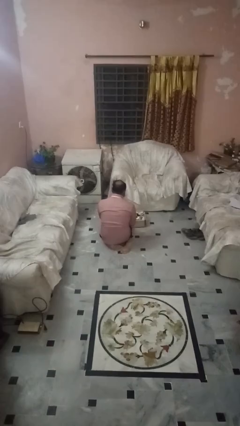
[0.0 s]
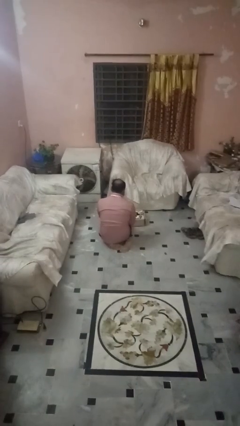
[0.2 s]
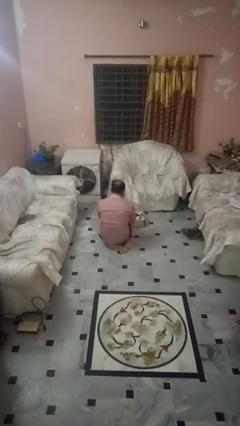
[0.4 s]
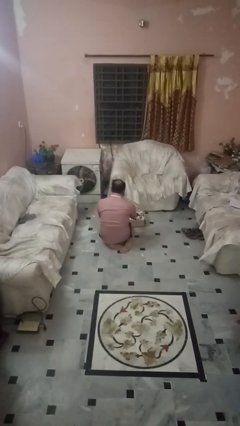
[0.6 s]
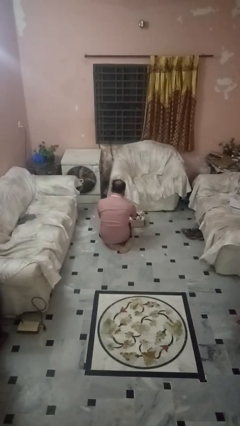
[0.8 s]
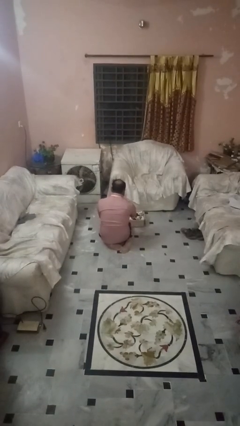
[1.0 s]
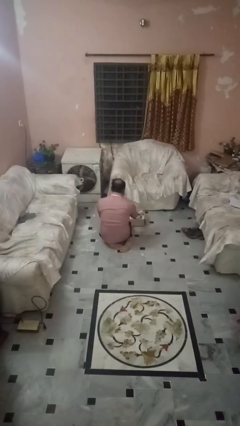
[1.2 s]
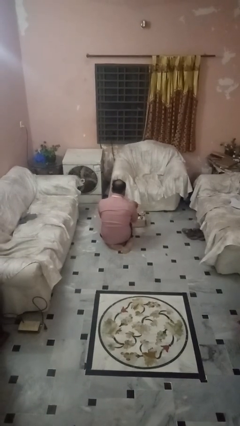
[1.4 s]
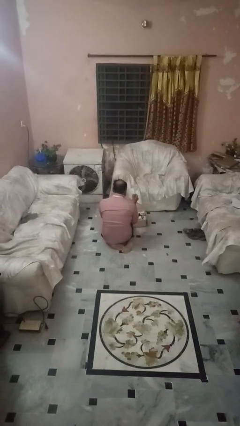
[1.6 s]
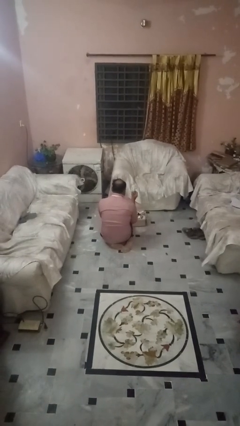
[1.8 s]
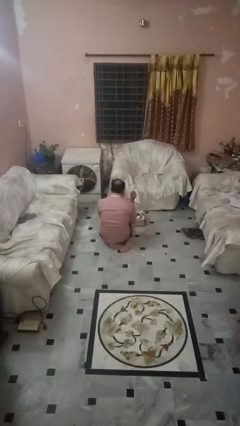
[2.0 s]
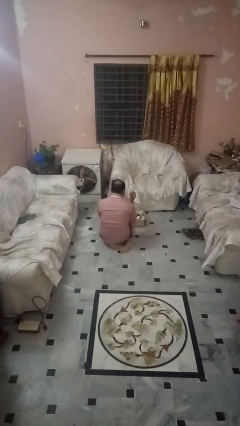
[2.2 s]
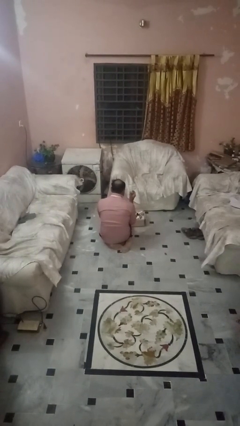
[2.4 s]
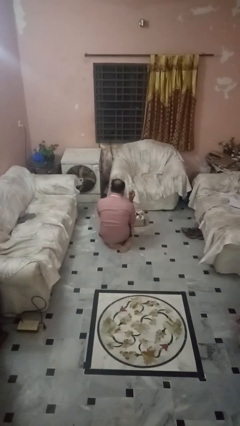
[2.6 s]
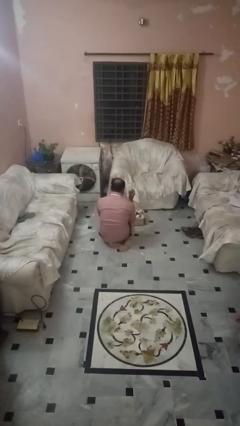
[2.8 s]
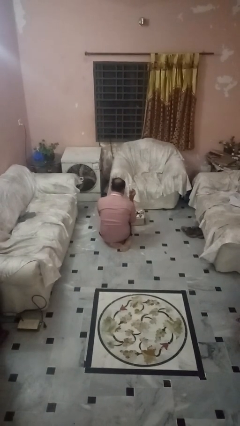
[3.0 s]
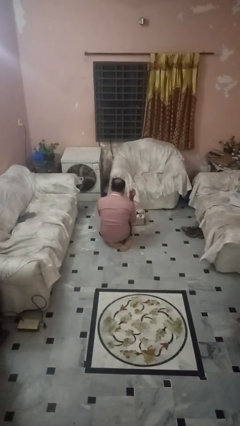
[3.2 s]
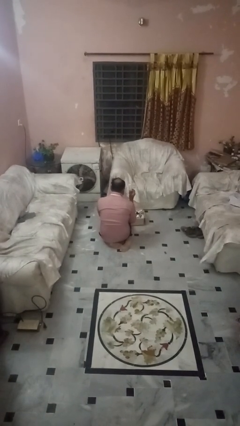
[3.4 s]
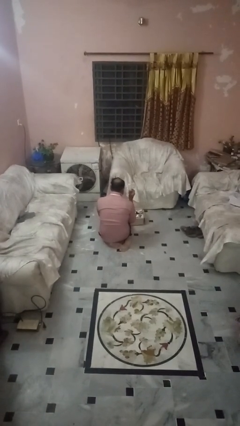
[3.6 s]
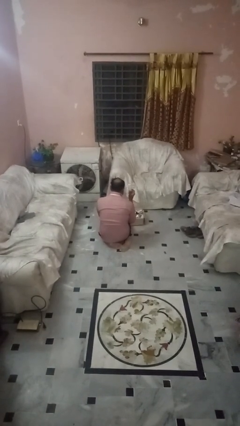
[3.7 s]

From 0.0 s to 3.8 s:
person takes object from box

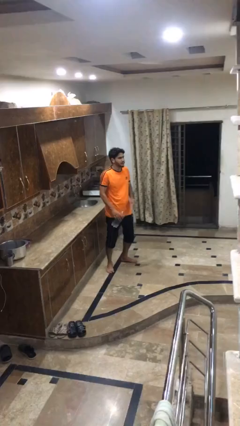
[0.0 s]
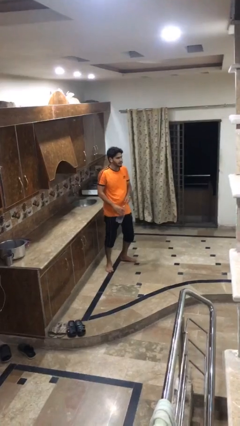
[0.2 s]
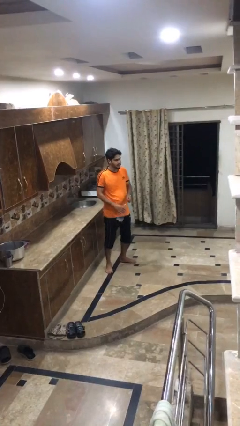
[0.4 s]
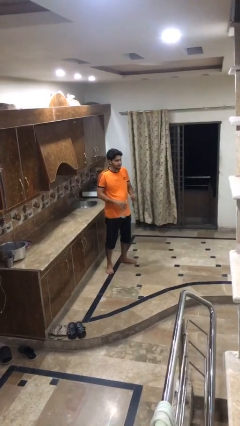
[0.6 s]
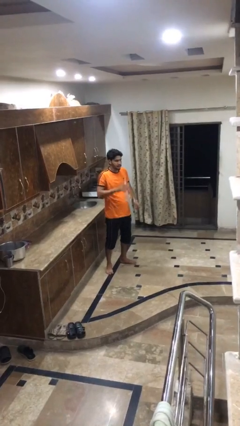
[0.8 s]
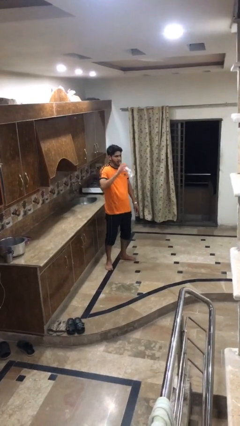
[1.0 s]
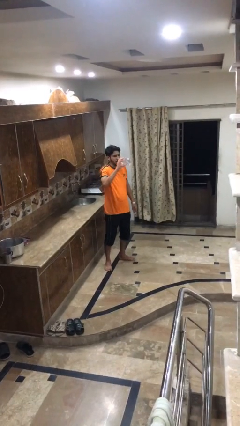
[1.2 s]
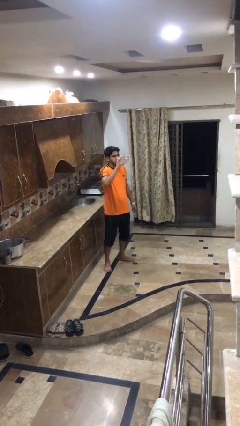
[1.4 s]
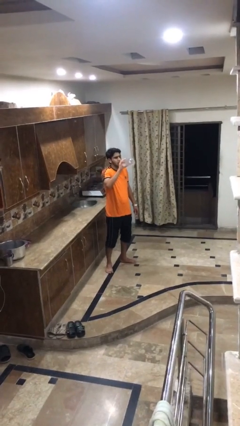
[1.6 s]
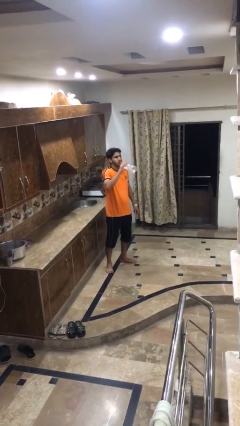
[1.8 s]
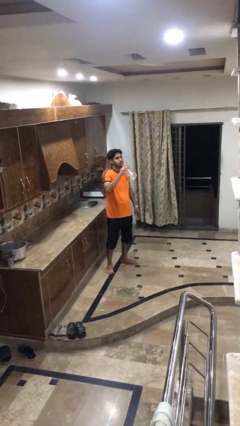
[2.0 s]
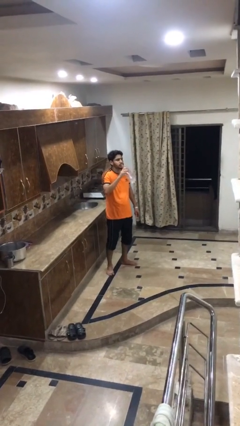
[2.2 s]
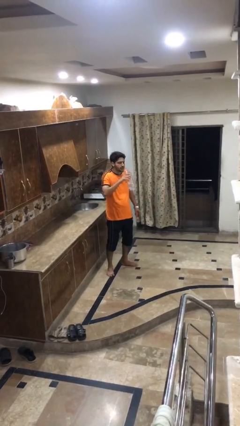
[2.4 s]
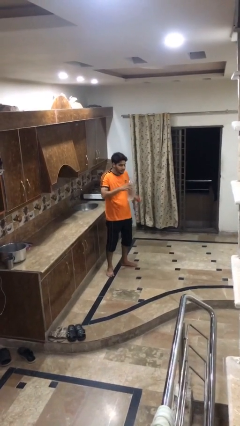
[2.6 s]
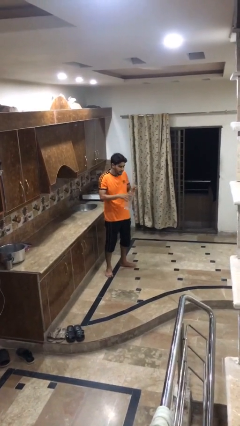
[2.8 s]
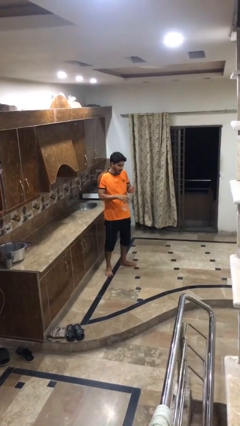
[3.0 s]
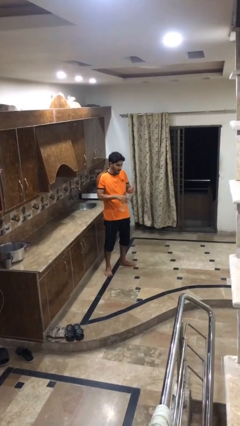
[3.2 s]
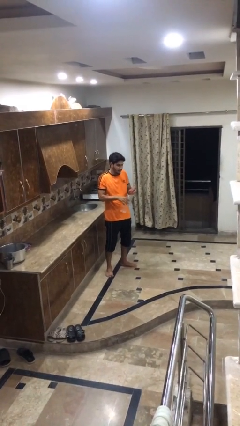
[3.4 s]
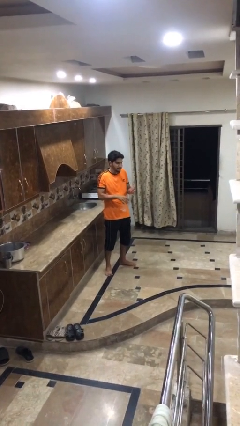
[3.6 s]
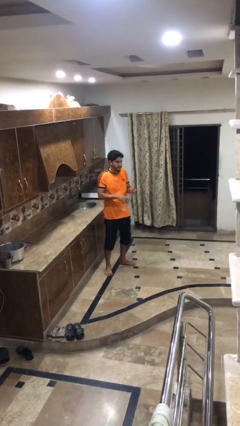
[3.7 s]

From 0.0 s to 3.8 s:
person drinks from bottle

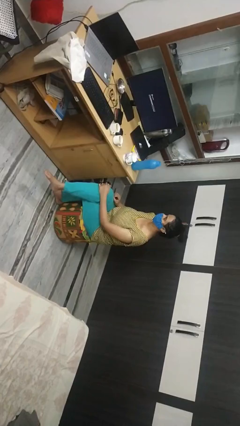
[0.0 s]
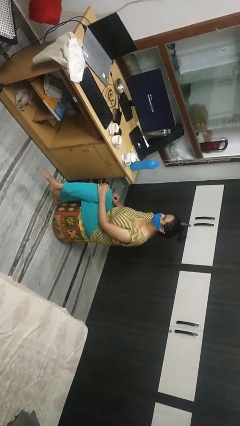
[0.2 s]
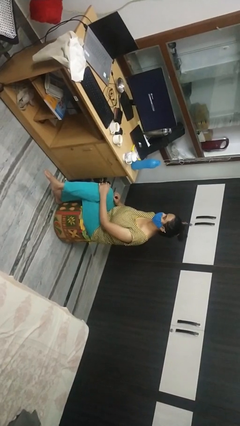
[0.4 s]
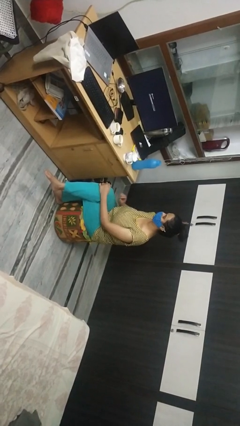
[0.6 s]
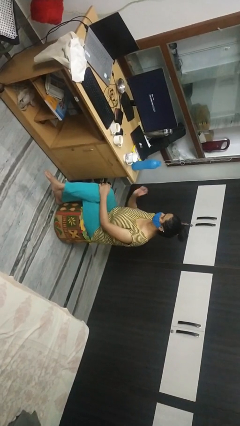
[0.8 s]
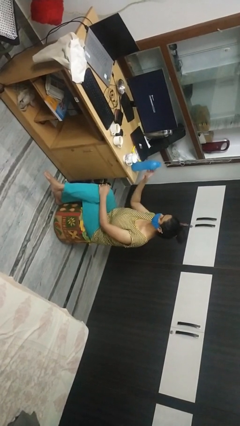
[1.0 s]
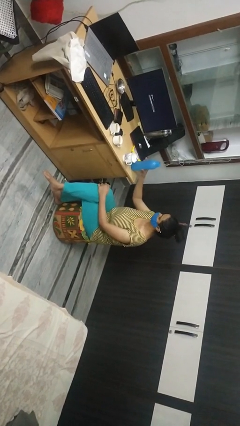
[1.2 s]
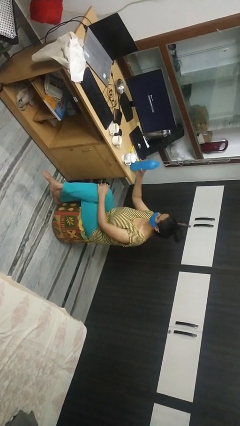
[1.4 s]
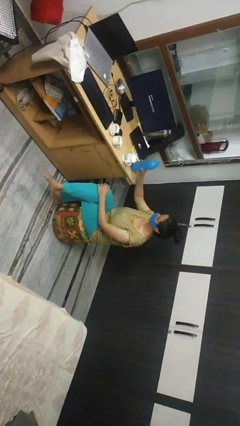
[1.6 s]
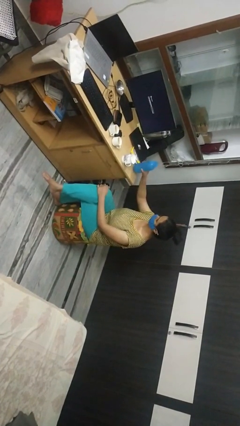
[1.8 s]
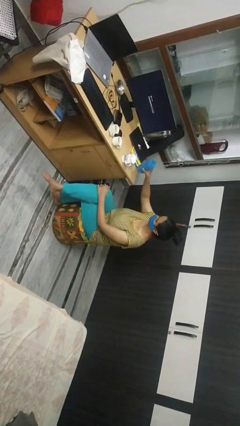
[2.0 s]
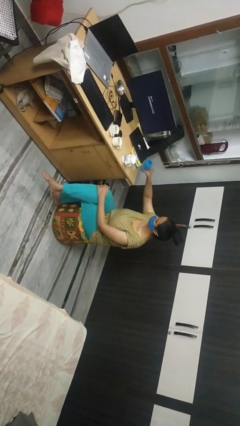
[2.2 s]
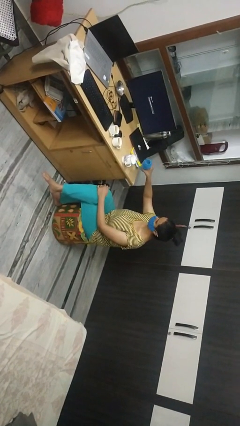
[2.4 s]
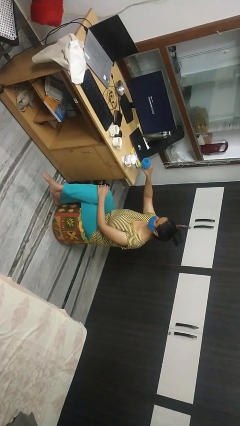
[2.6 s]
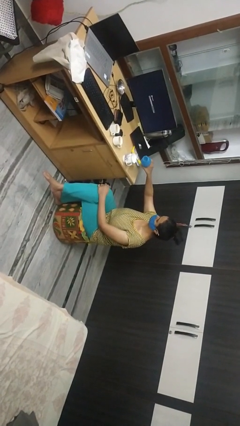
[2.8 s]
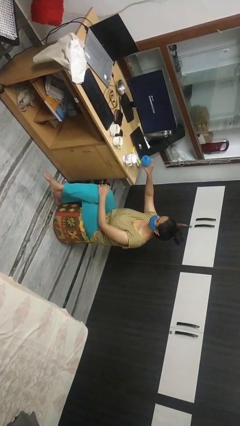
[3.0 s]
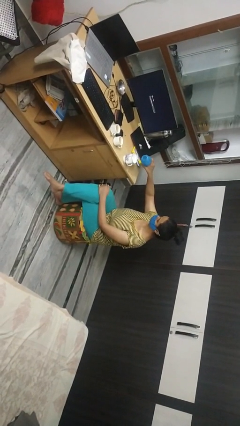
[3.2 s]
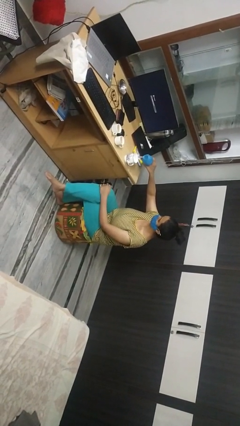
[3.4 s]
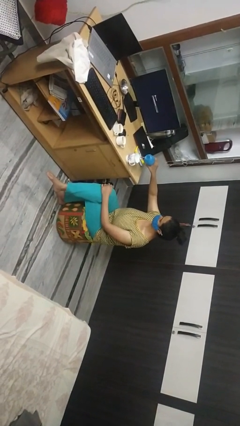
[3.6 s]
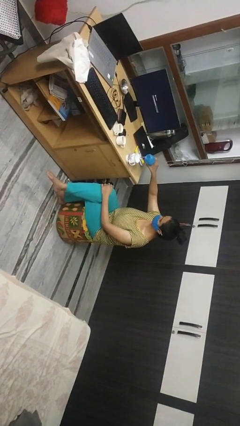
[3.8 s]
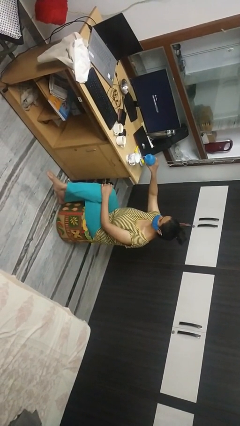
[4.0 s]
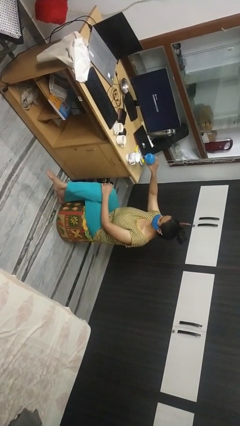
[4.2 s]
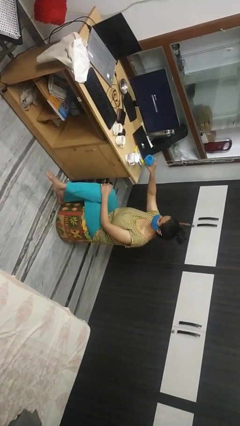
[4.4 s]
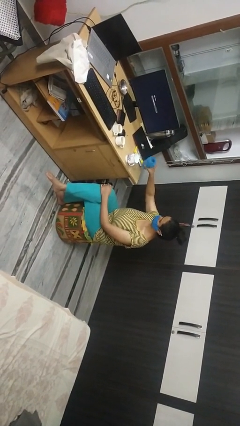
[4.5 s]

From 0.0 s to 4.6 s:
person pours liquid into cup

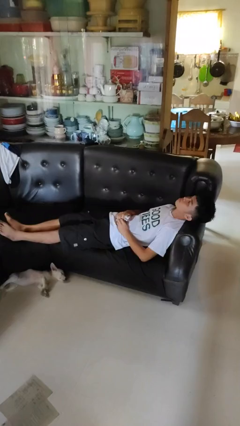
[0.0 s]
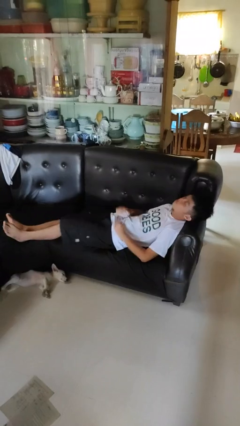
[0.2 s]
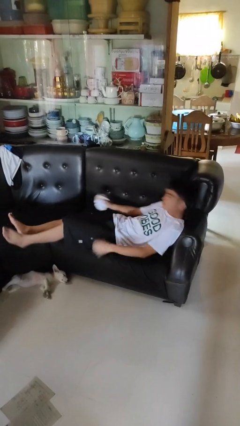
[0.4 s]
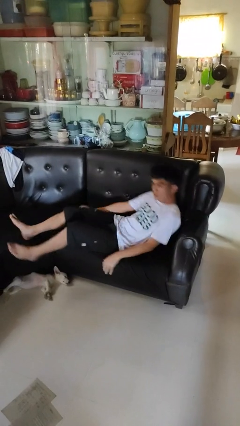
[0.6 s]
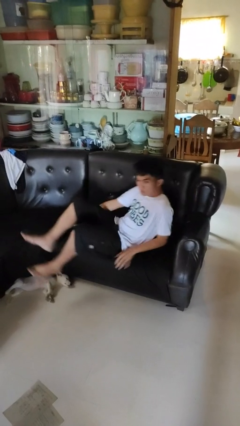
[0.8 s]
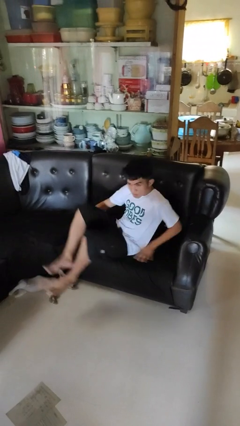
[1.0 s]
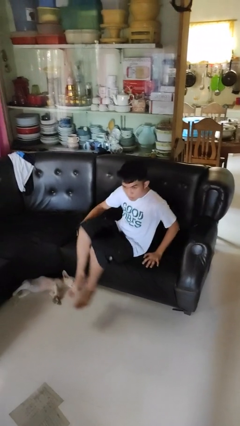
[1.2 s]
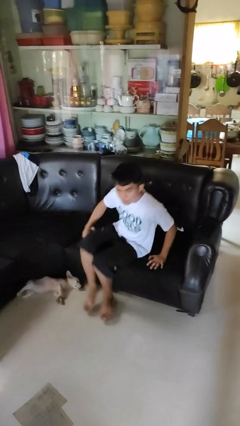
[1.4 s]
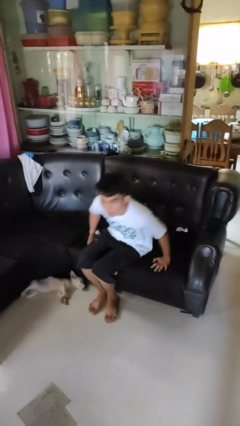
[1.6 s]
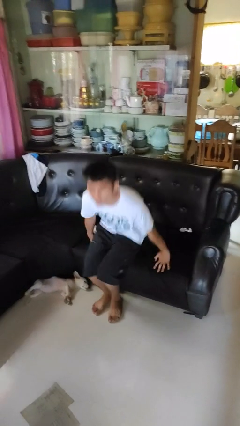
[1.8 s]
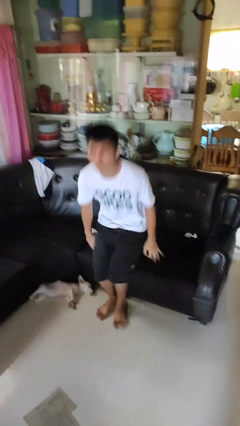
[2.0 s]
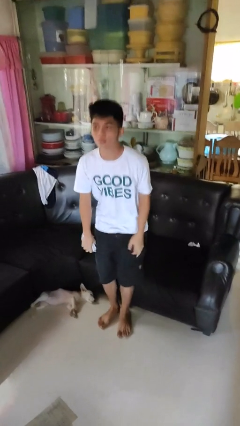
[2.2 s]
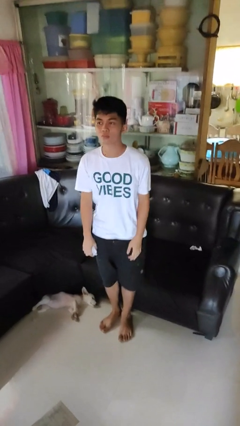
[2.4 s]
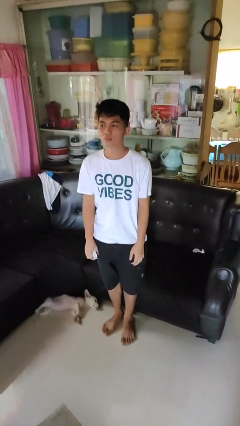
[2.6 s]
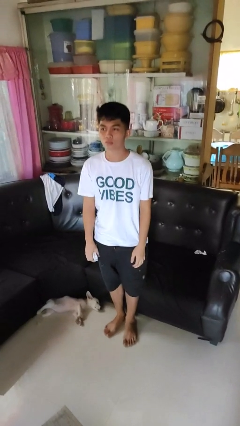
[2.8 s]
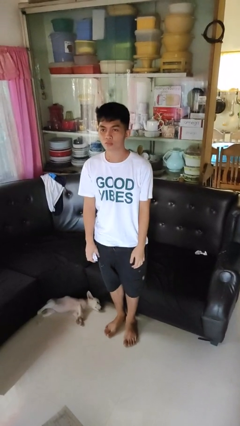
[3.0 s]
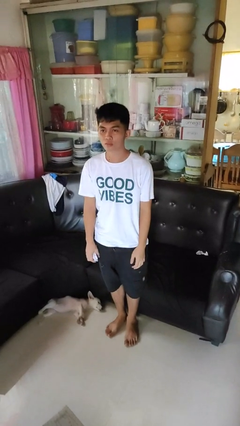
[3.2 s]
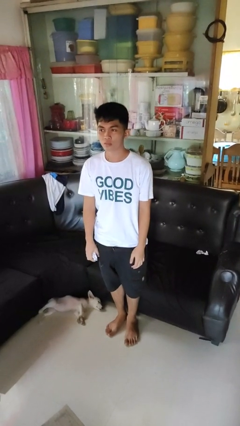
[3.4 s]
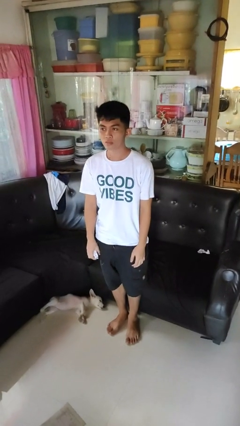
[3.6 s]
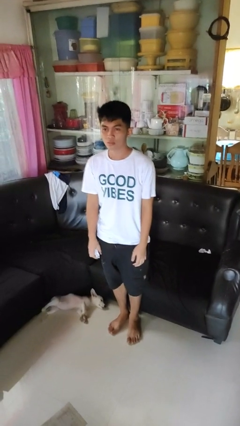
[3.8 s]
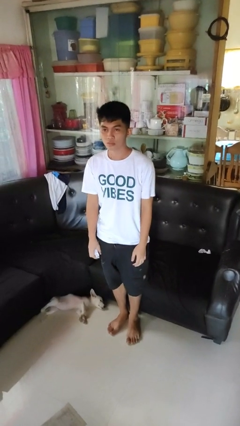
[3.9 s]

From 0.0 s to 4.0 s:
person stands up

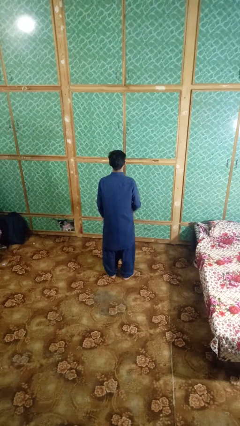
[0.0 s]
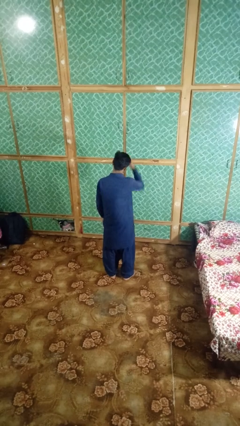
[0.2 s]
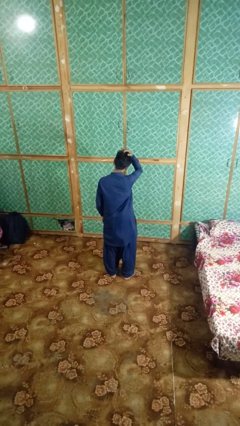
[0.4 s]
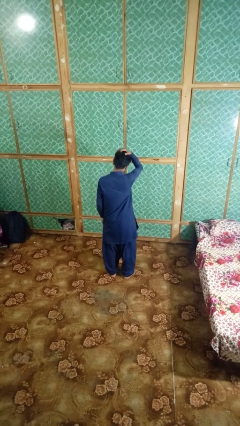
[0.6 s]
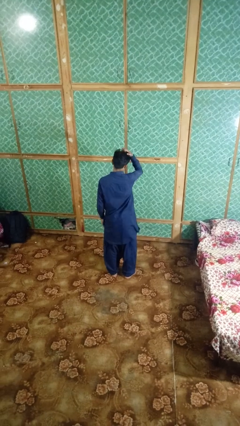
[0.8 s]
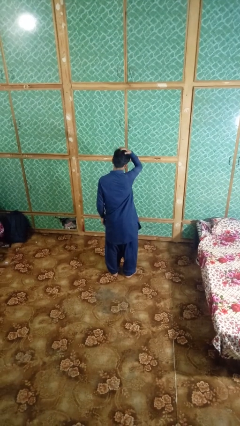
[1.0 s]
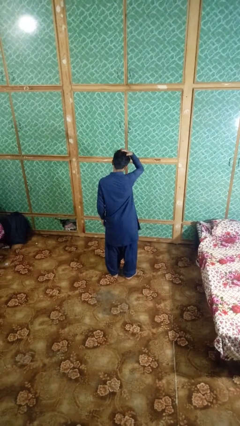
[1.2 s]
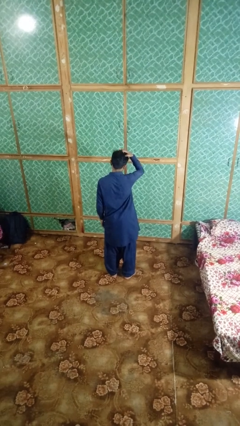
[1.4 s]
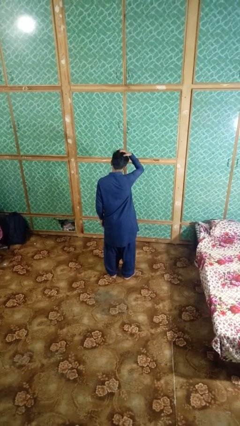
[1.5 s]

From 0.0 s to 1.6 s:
person strokes hair
